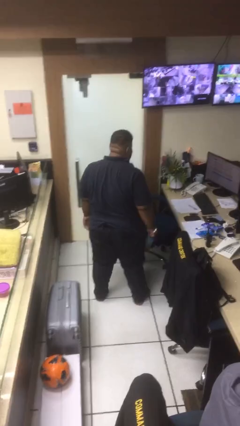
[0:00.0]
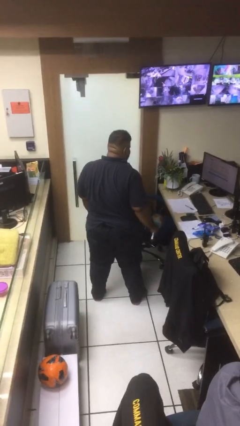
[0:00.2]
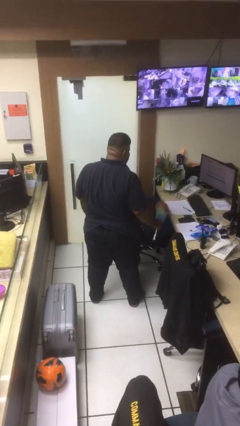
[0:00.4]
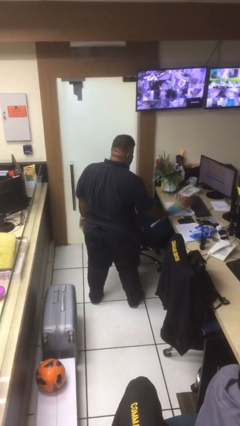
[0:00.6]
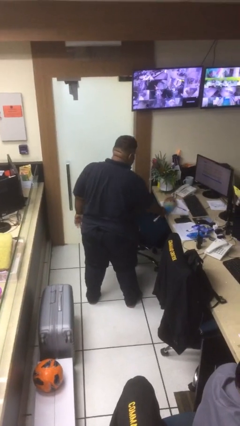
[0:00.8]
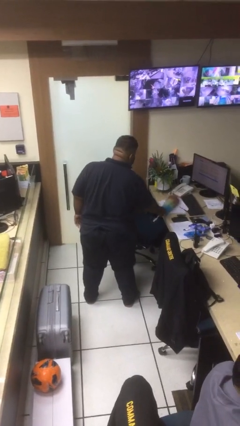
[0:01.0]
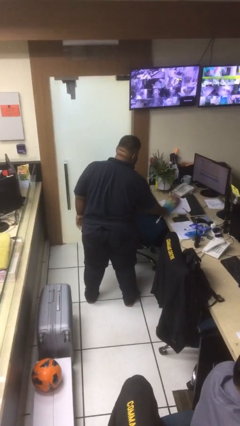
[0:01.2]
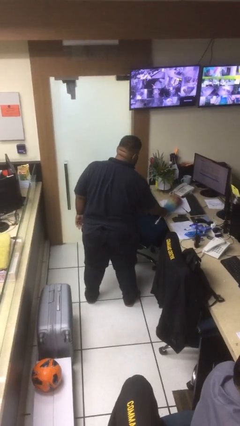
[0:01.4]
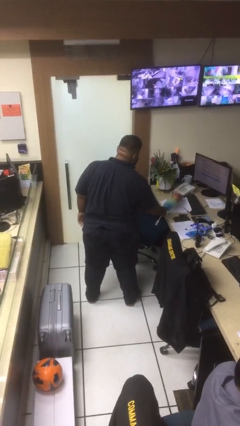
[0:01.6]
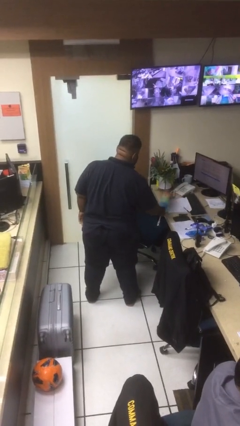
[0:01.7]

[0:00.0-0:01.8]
person dusts furniture

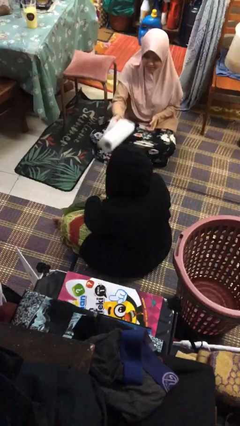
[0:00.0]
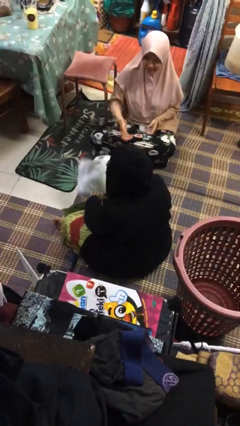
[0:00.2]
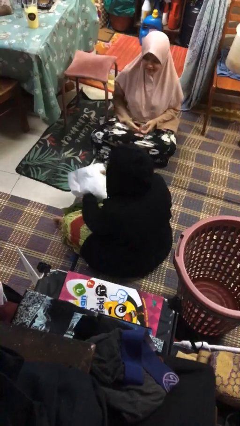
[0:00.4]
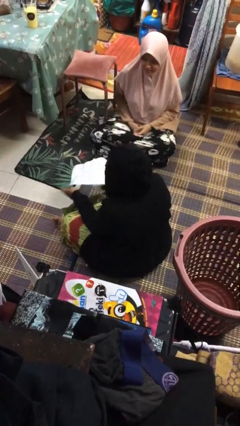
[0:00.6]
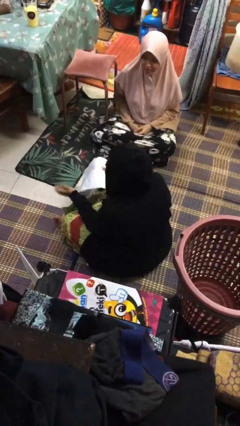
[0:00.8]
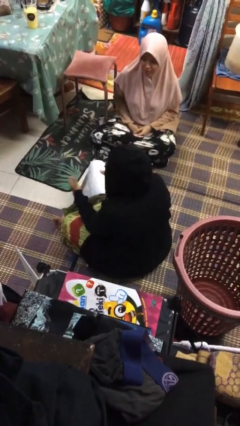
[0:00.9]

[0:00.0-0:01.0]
person catches object from person

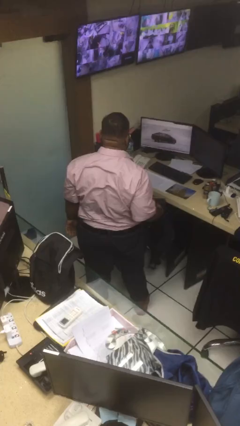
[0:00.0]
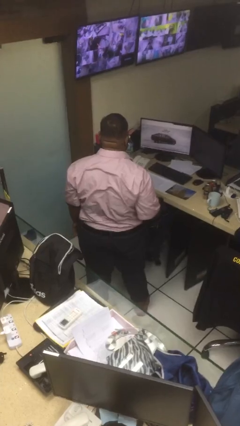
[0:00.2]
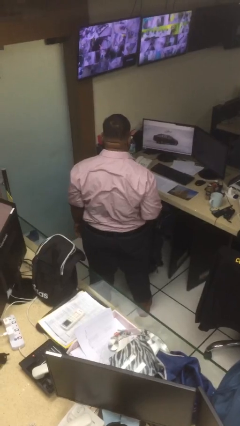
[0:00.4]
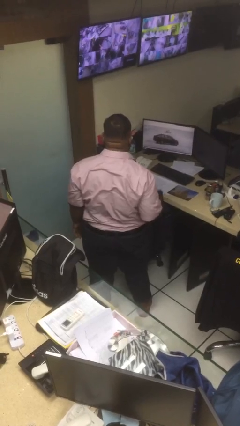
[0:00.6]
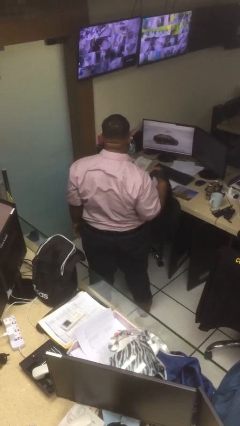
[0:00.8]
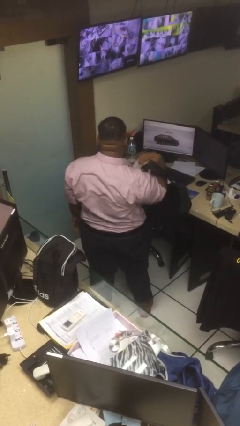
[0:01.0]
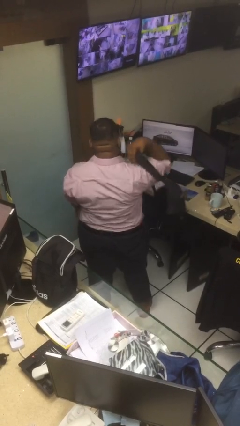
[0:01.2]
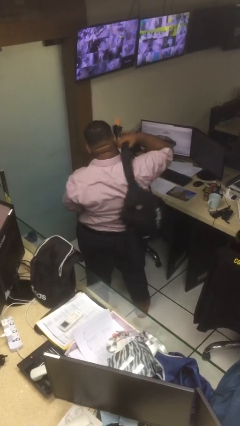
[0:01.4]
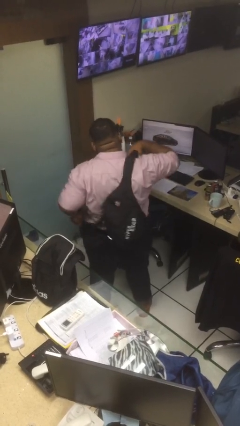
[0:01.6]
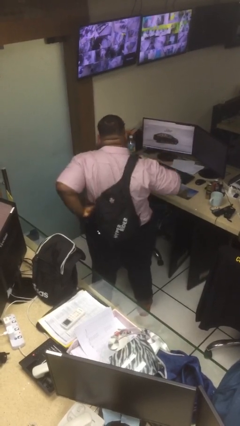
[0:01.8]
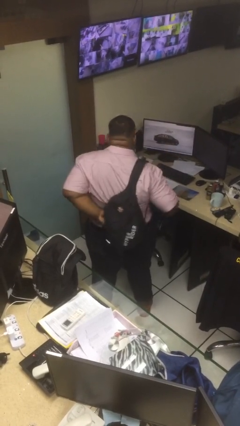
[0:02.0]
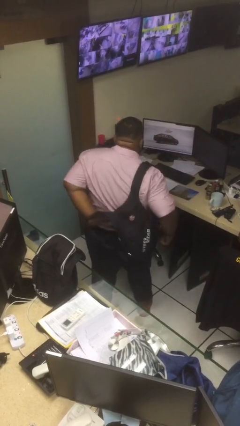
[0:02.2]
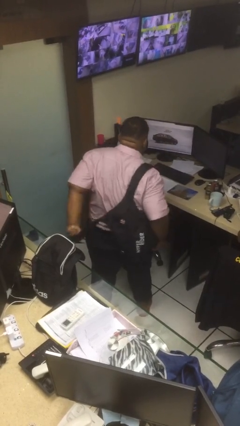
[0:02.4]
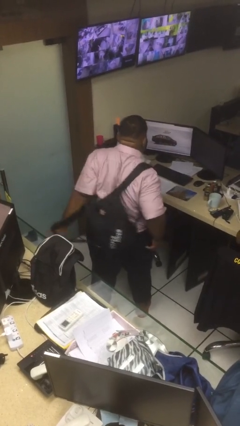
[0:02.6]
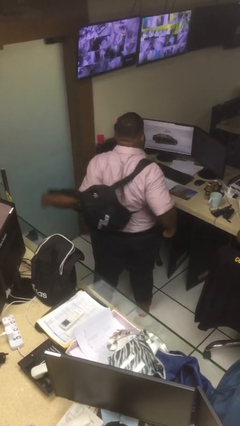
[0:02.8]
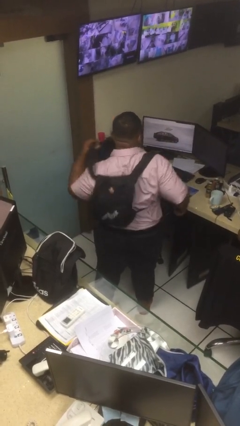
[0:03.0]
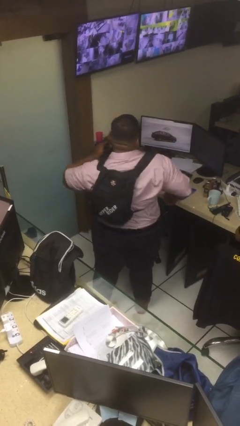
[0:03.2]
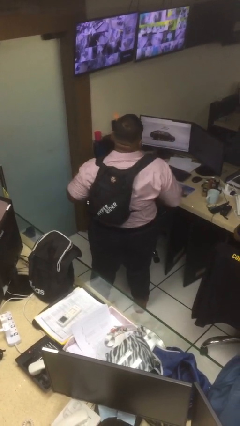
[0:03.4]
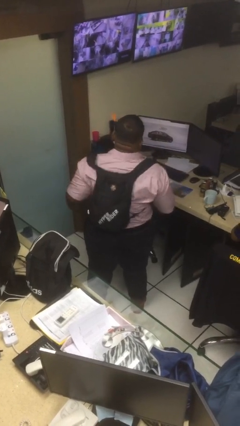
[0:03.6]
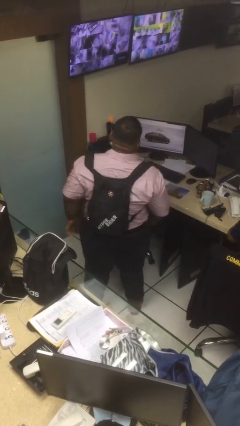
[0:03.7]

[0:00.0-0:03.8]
person puts on backpack

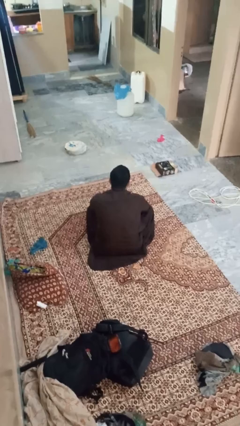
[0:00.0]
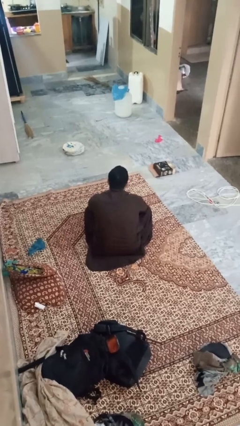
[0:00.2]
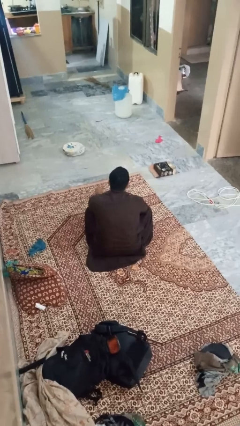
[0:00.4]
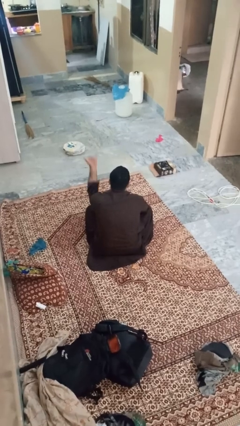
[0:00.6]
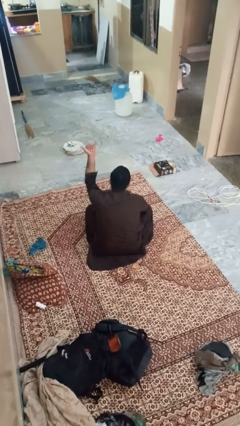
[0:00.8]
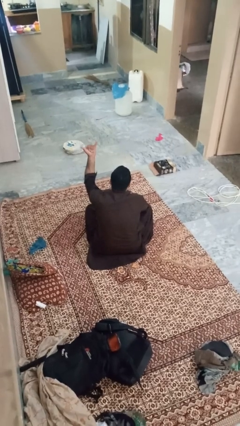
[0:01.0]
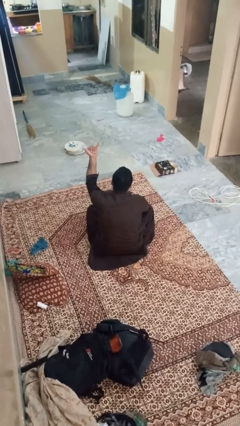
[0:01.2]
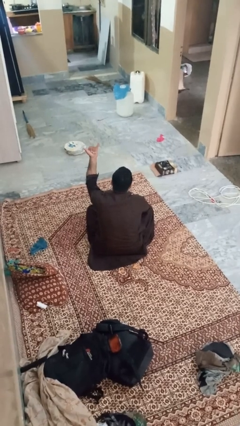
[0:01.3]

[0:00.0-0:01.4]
person gestures hang loose

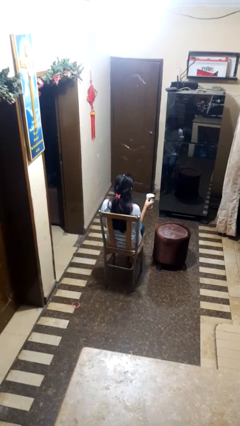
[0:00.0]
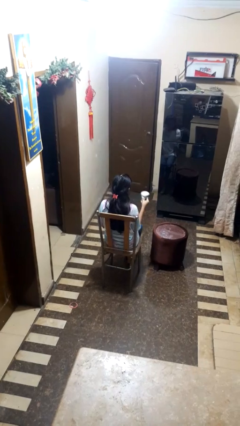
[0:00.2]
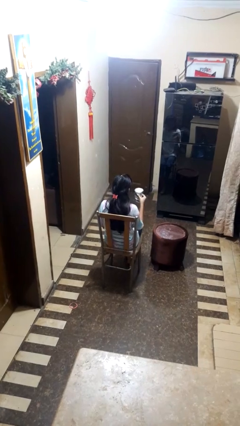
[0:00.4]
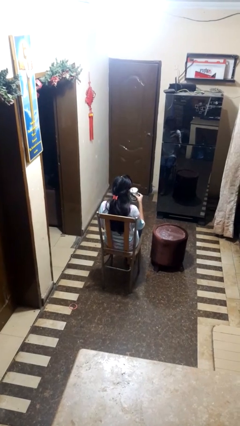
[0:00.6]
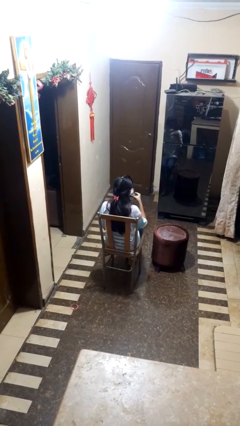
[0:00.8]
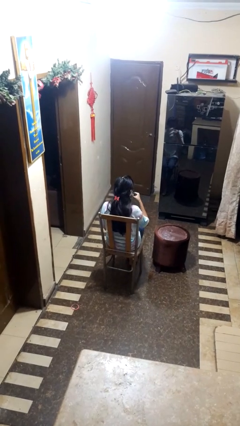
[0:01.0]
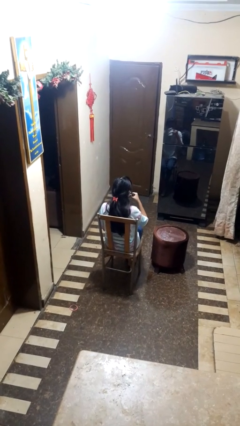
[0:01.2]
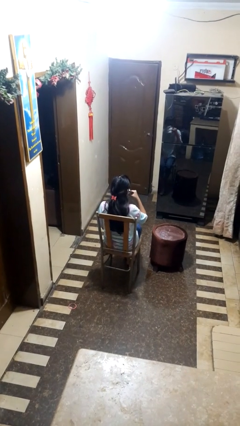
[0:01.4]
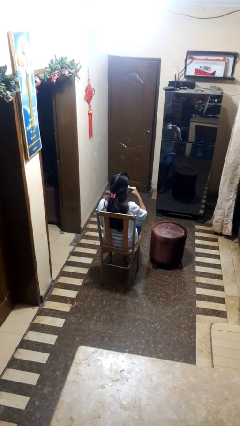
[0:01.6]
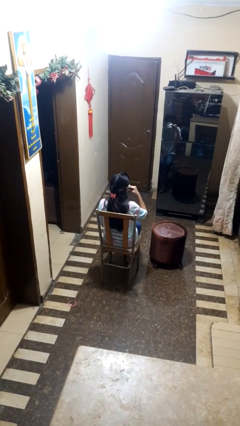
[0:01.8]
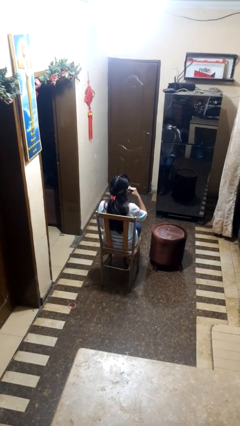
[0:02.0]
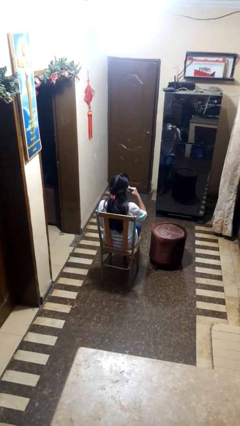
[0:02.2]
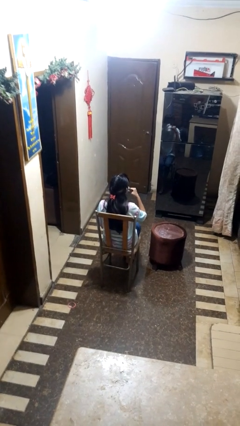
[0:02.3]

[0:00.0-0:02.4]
person drinks from mug

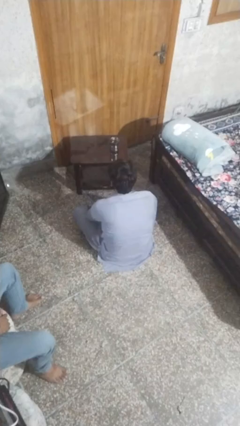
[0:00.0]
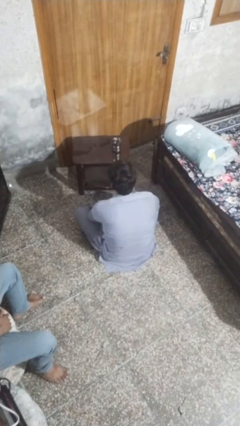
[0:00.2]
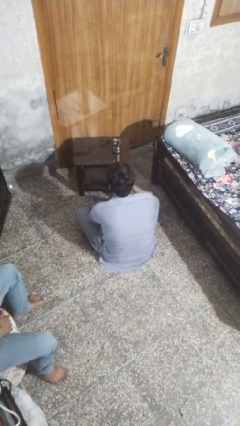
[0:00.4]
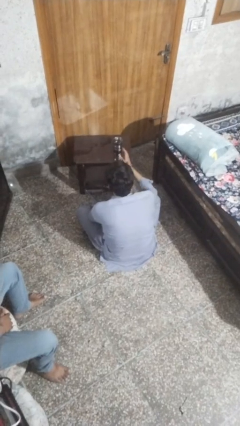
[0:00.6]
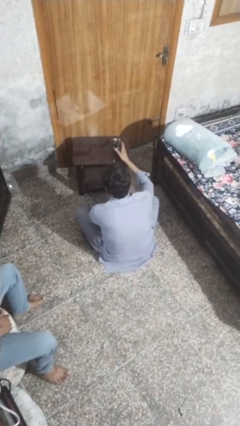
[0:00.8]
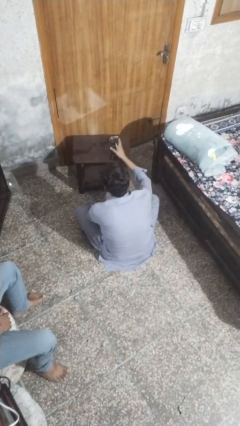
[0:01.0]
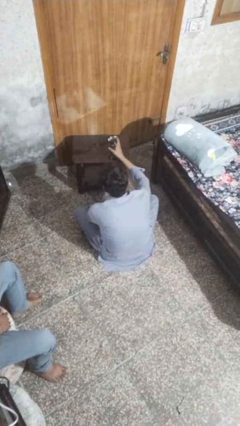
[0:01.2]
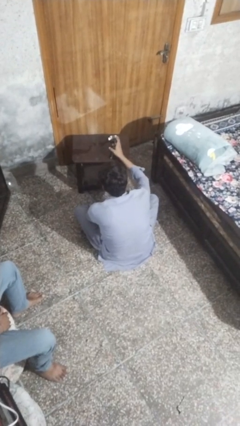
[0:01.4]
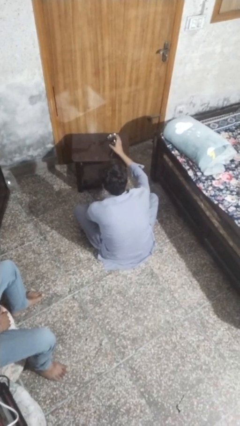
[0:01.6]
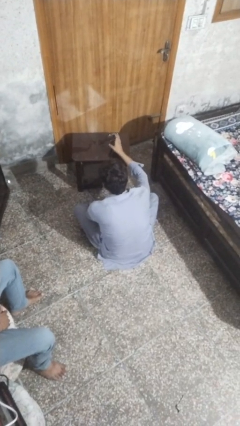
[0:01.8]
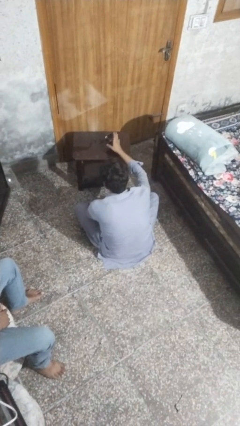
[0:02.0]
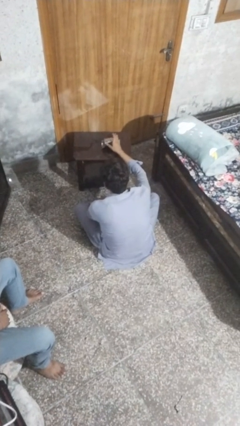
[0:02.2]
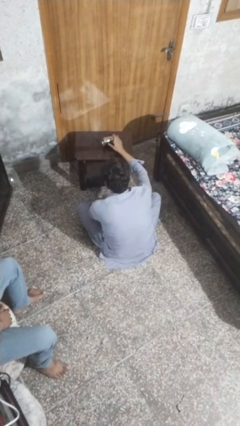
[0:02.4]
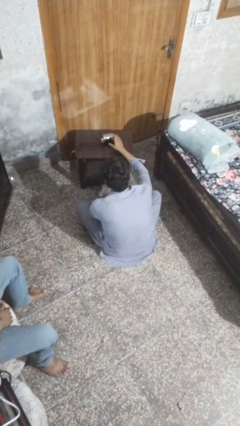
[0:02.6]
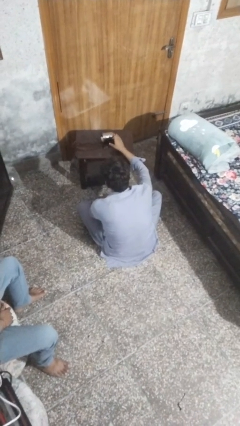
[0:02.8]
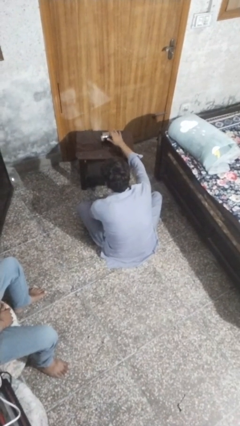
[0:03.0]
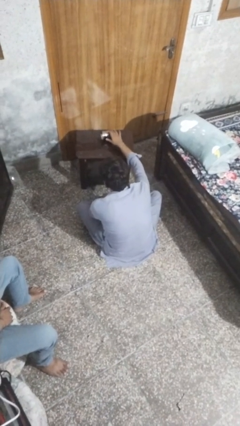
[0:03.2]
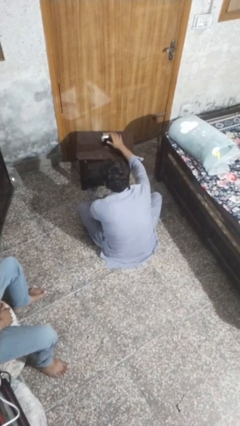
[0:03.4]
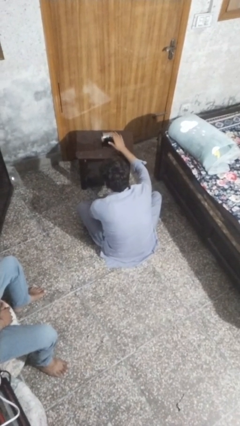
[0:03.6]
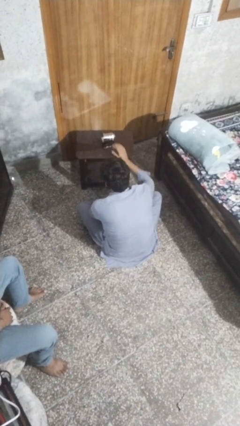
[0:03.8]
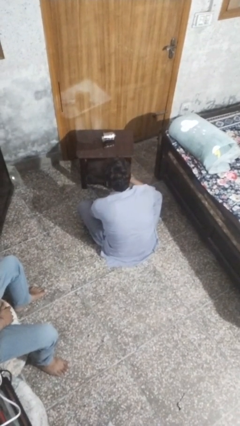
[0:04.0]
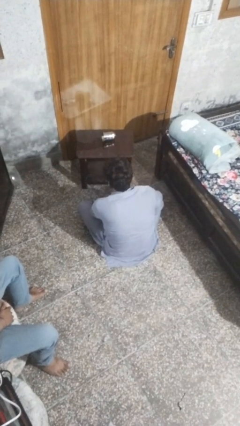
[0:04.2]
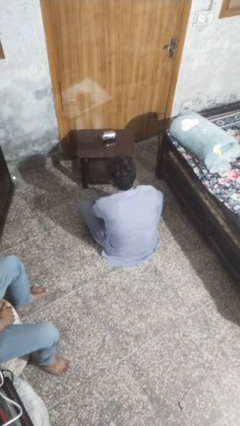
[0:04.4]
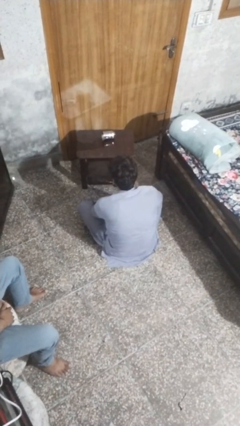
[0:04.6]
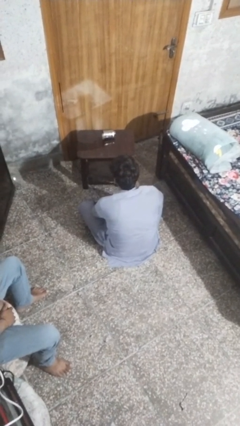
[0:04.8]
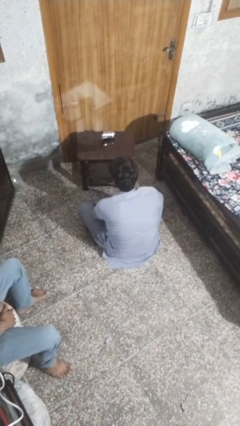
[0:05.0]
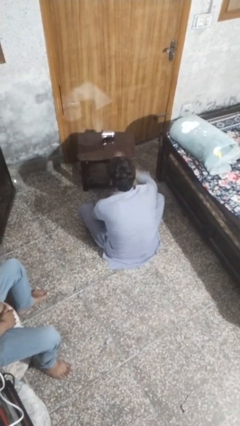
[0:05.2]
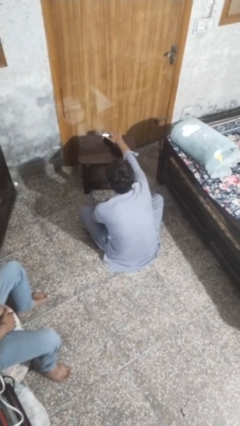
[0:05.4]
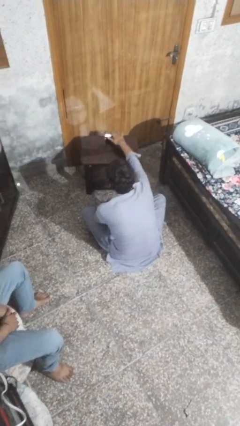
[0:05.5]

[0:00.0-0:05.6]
person spills on table

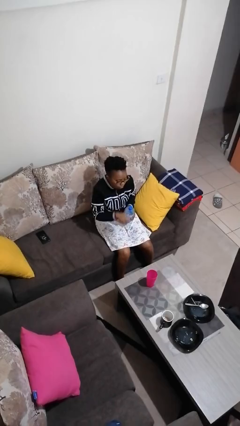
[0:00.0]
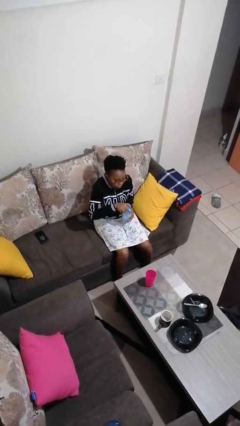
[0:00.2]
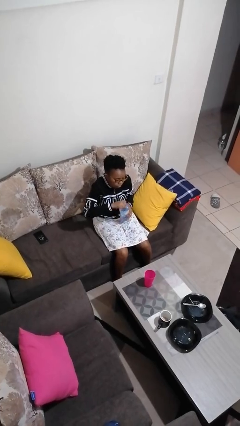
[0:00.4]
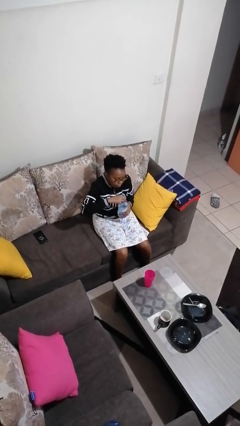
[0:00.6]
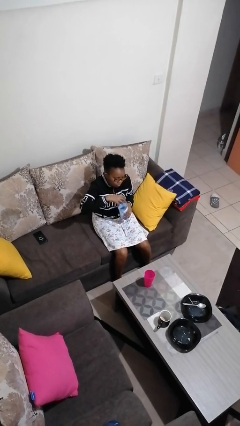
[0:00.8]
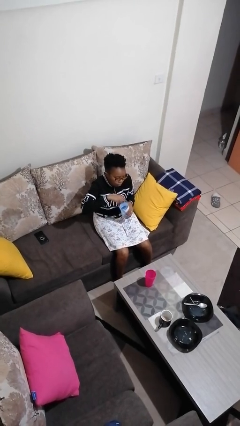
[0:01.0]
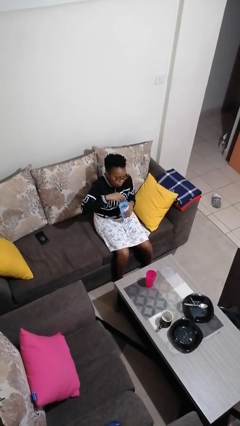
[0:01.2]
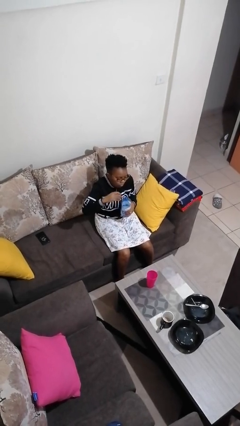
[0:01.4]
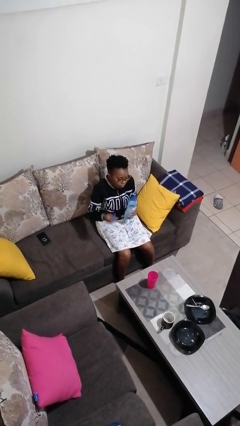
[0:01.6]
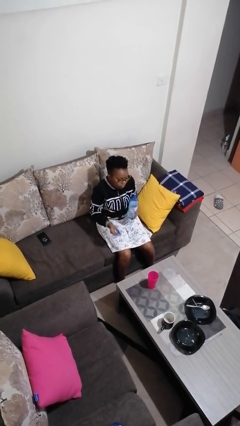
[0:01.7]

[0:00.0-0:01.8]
person unscrews lid from bottle
